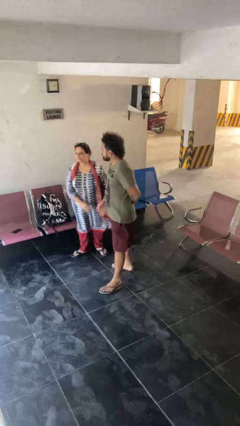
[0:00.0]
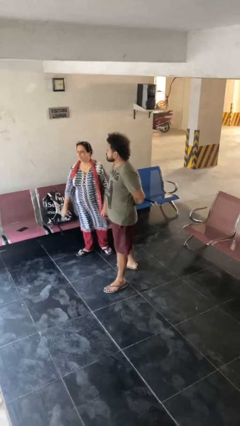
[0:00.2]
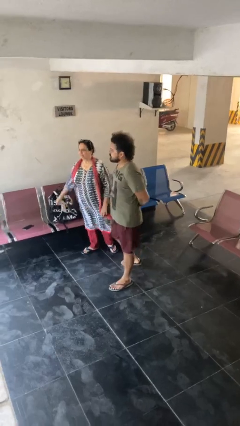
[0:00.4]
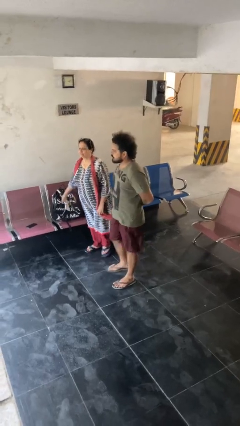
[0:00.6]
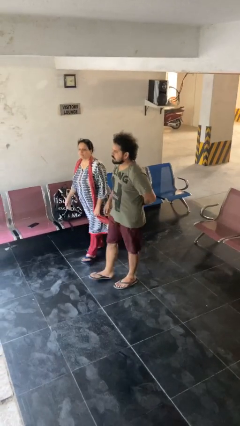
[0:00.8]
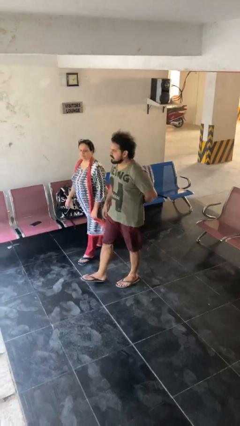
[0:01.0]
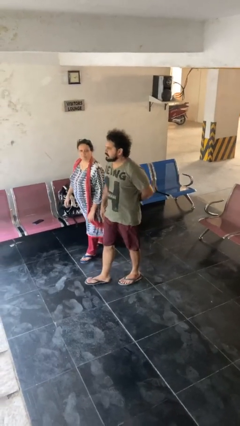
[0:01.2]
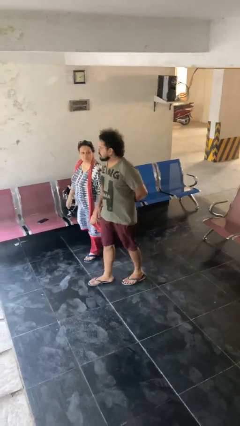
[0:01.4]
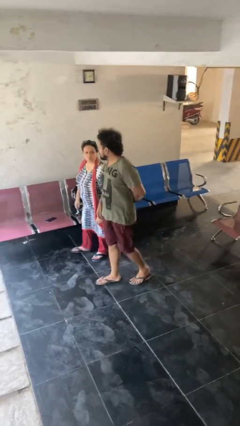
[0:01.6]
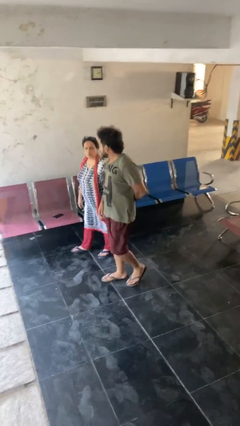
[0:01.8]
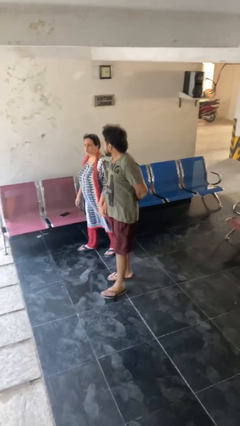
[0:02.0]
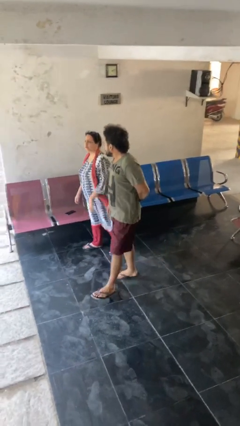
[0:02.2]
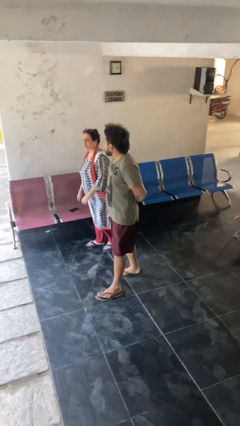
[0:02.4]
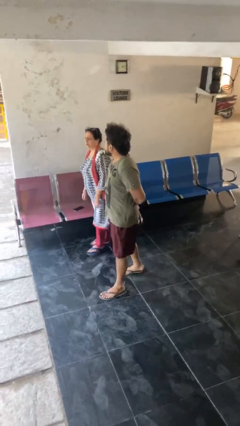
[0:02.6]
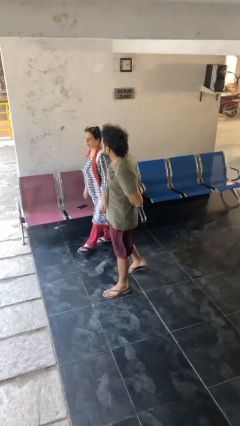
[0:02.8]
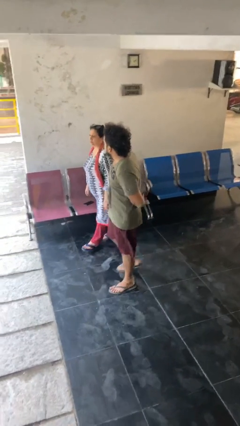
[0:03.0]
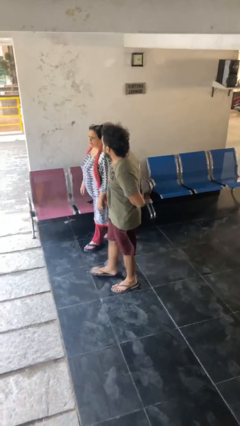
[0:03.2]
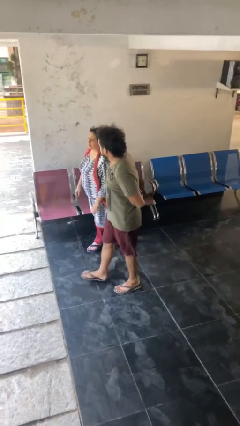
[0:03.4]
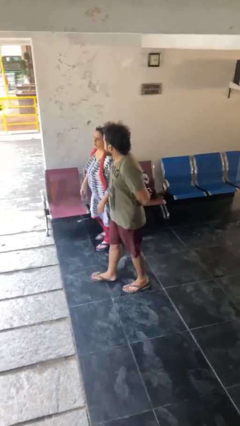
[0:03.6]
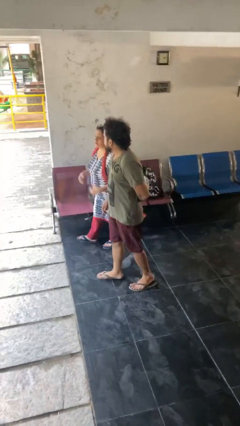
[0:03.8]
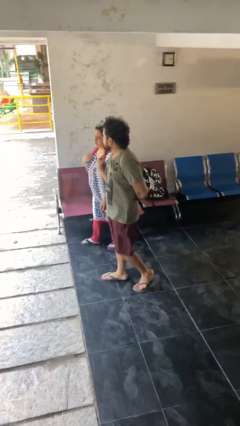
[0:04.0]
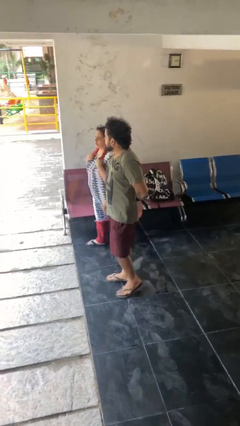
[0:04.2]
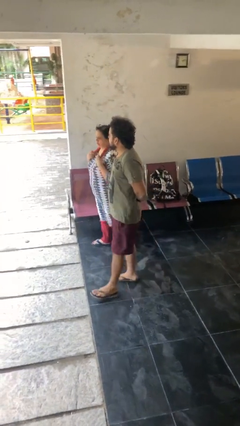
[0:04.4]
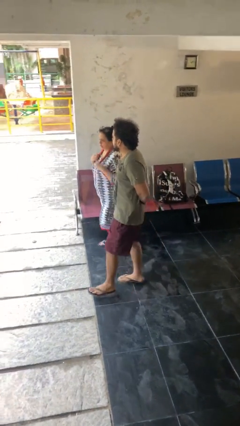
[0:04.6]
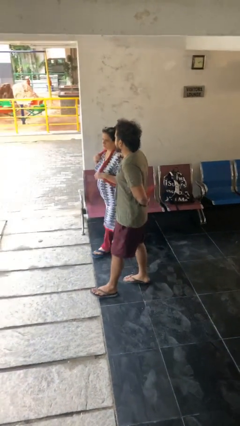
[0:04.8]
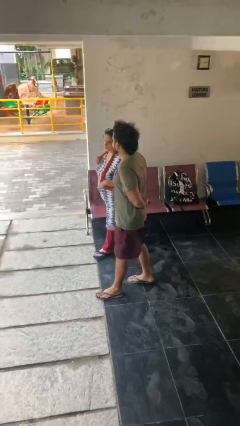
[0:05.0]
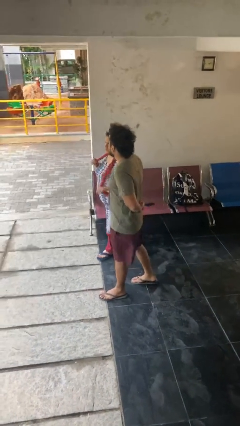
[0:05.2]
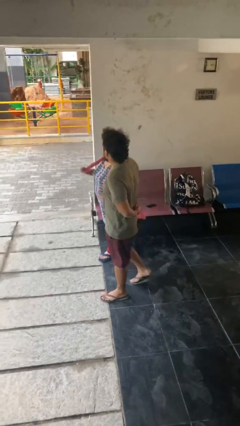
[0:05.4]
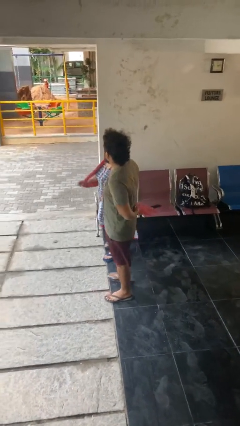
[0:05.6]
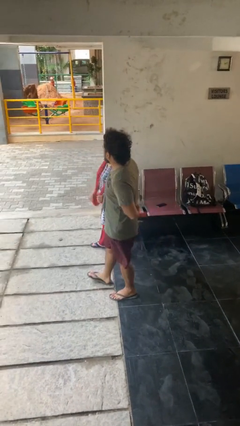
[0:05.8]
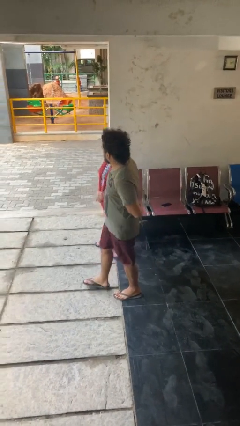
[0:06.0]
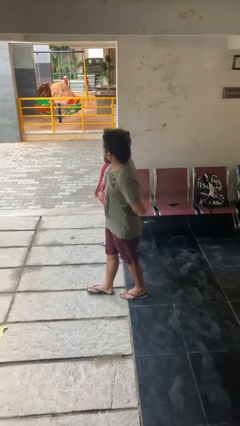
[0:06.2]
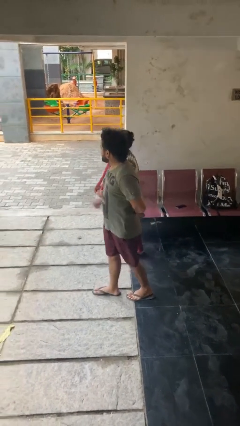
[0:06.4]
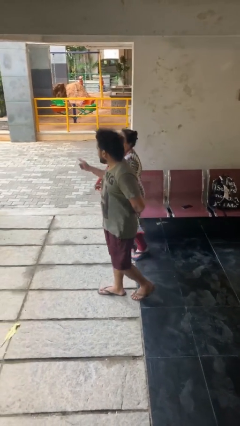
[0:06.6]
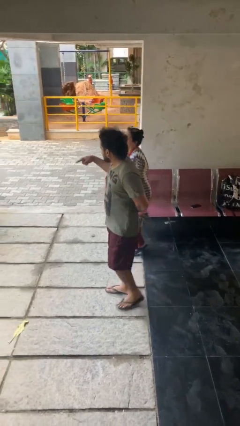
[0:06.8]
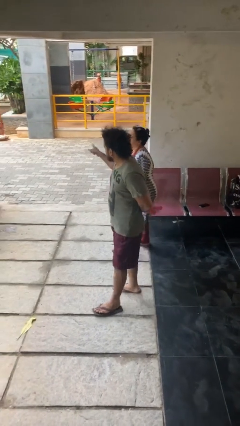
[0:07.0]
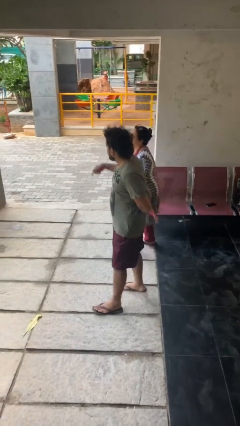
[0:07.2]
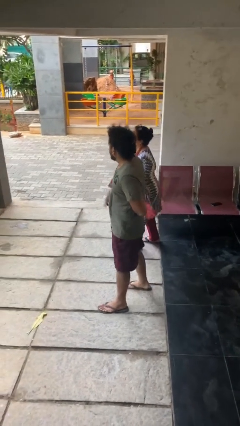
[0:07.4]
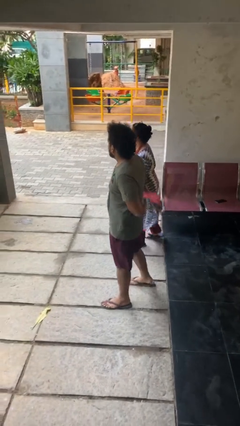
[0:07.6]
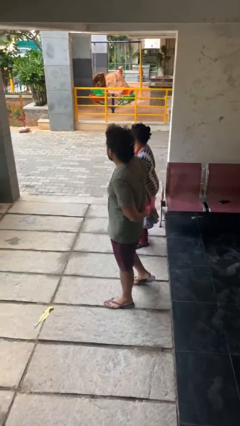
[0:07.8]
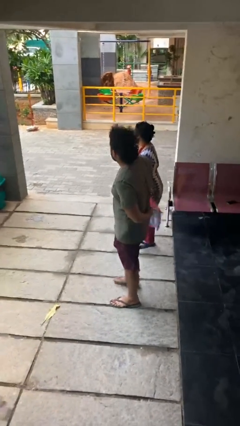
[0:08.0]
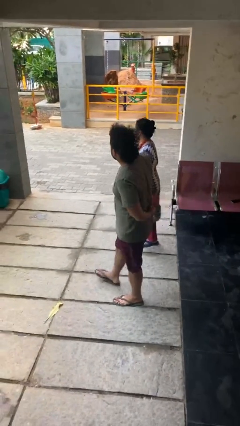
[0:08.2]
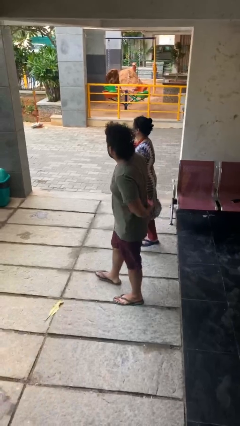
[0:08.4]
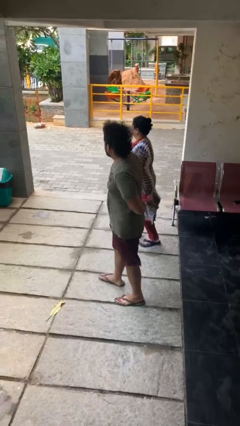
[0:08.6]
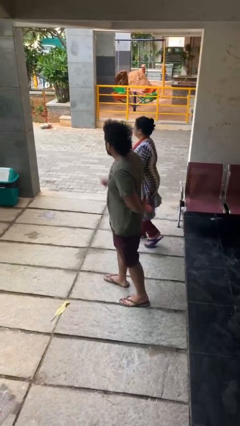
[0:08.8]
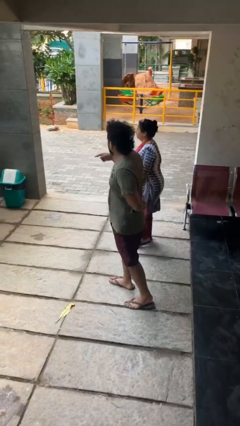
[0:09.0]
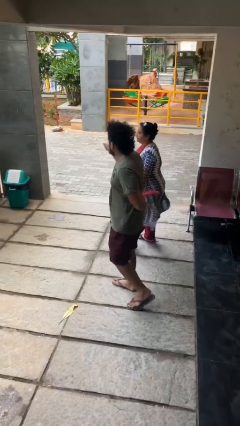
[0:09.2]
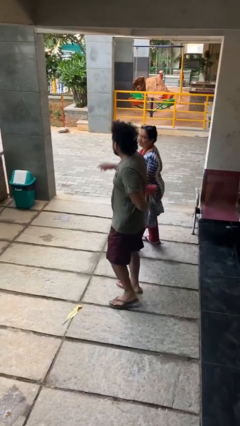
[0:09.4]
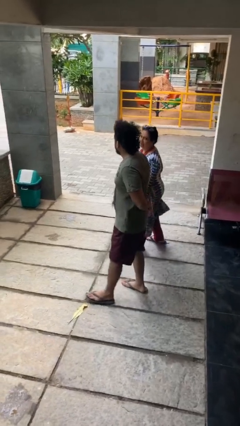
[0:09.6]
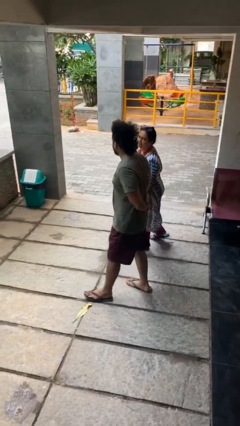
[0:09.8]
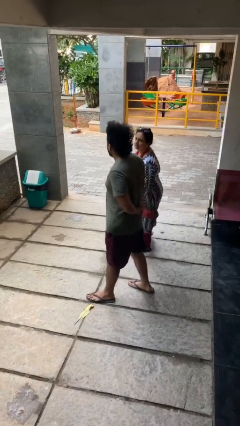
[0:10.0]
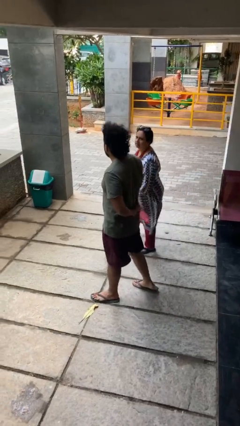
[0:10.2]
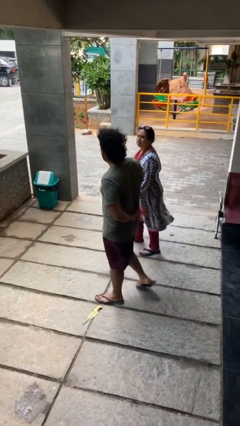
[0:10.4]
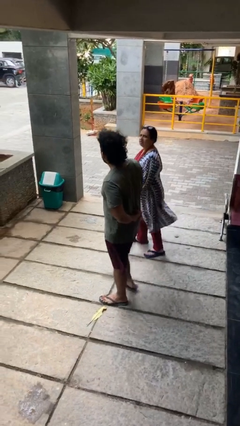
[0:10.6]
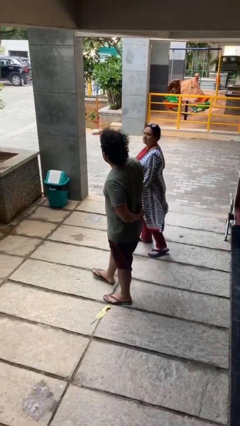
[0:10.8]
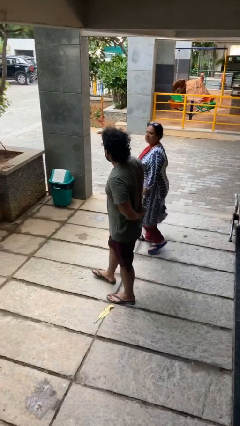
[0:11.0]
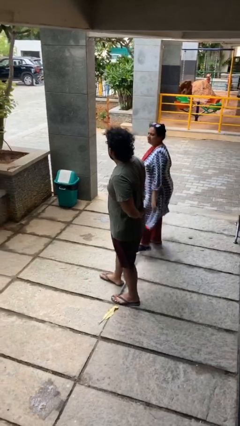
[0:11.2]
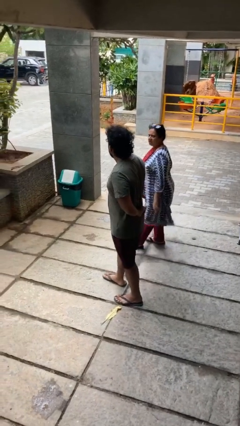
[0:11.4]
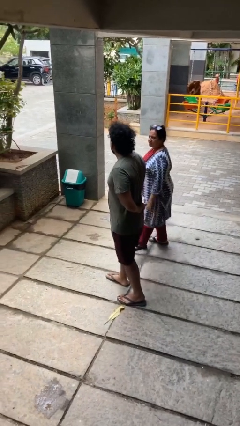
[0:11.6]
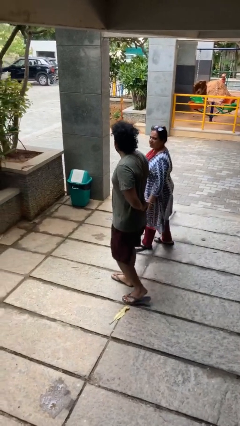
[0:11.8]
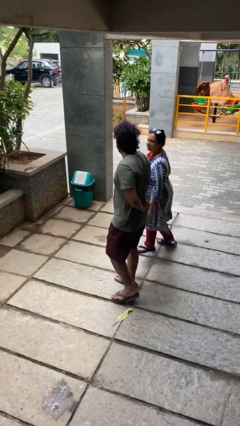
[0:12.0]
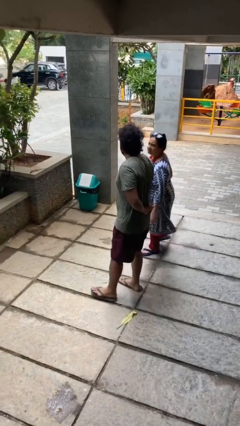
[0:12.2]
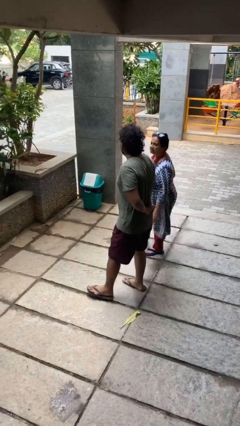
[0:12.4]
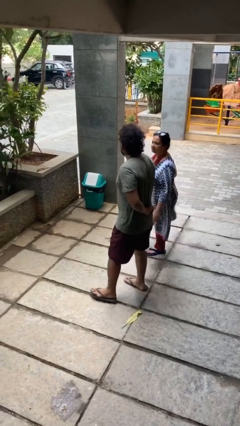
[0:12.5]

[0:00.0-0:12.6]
person talks to person

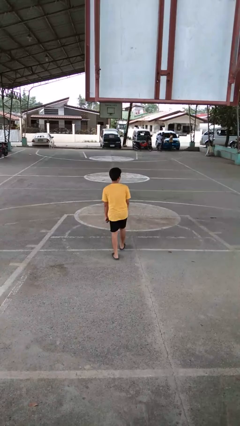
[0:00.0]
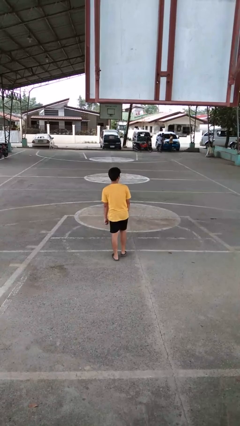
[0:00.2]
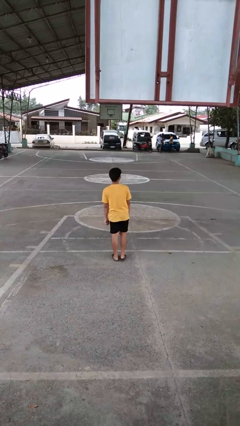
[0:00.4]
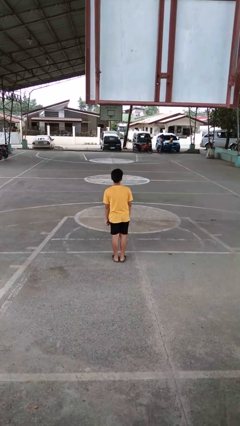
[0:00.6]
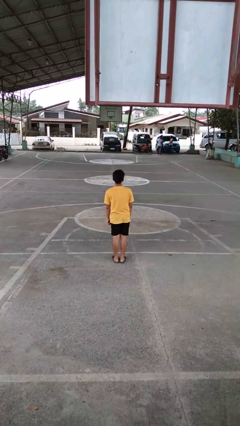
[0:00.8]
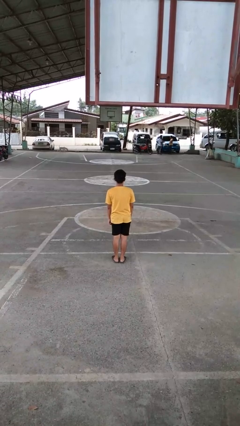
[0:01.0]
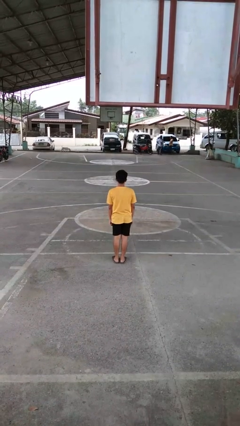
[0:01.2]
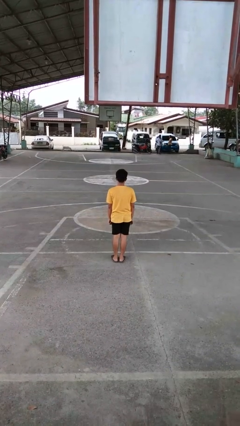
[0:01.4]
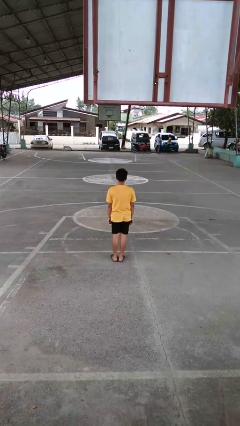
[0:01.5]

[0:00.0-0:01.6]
person stands up from floor

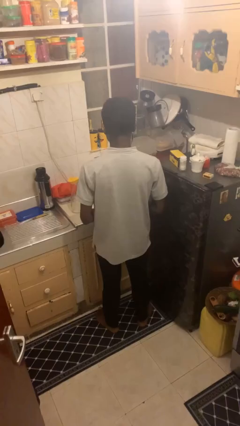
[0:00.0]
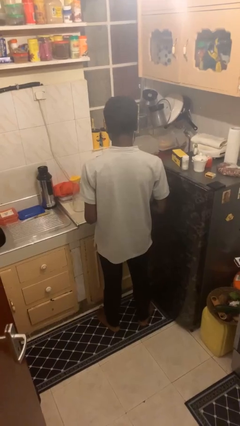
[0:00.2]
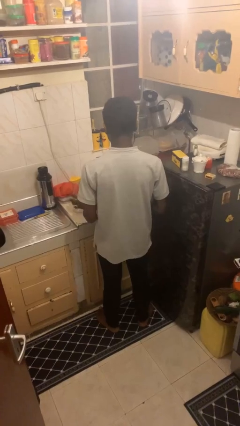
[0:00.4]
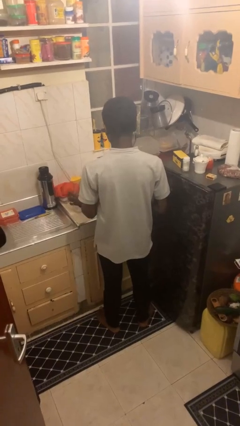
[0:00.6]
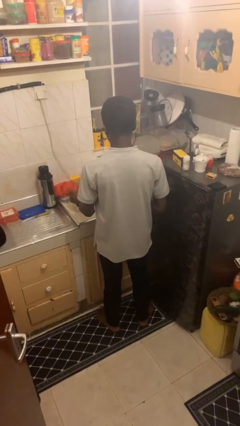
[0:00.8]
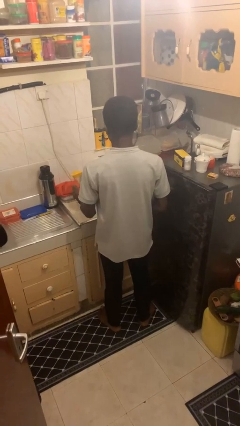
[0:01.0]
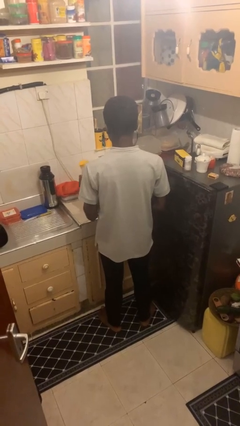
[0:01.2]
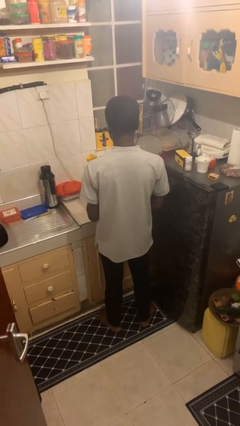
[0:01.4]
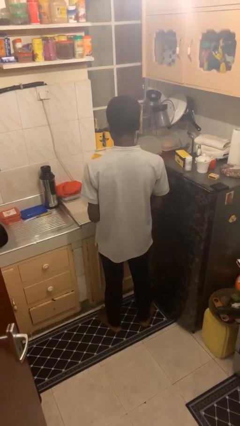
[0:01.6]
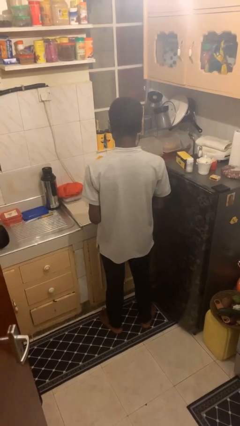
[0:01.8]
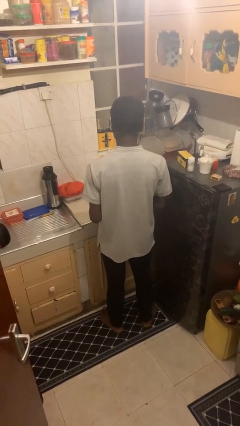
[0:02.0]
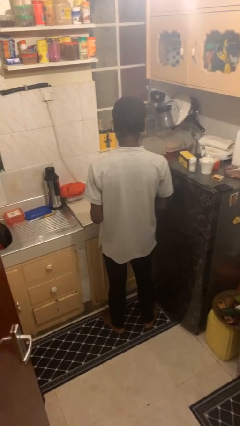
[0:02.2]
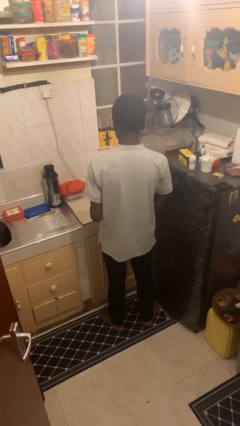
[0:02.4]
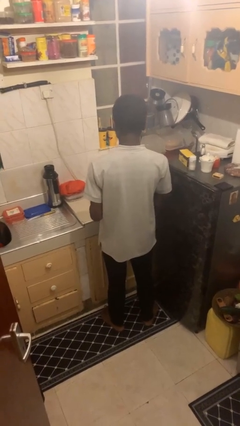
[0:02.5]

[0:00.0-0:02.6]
person picks up object from countertop

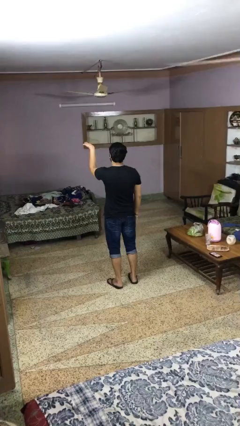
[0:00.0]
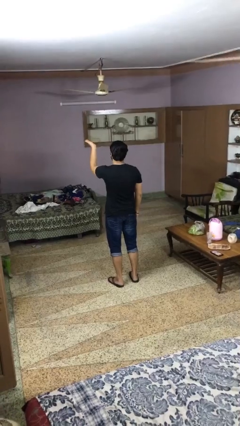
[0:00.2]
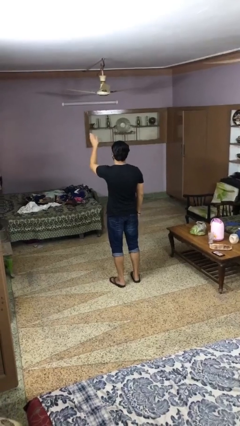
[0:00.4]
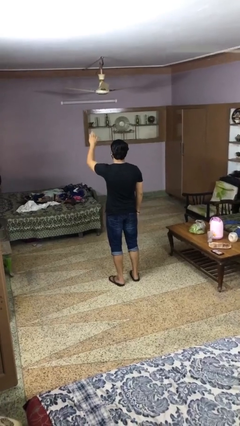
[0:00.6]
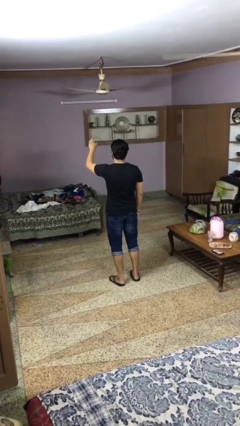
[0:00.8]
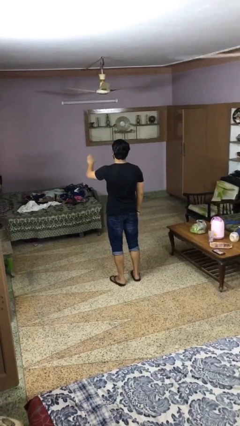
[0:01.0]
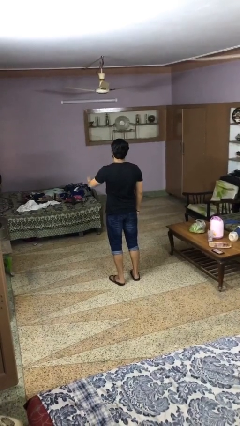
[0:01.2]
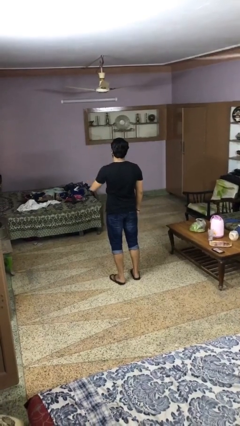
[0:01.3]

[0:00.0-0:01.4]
person gestures swipe down
